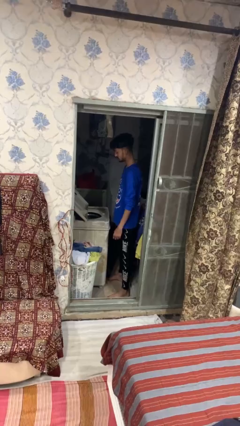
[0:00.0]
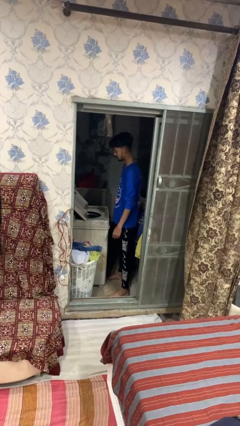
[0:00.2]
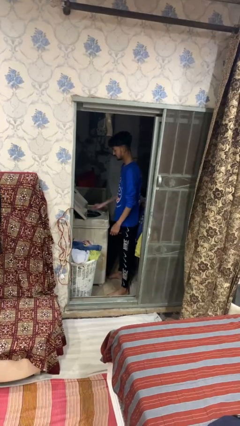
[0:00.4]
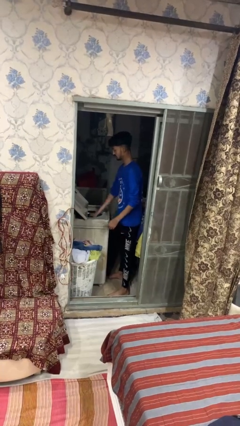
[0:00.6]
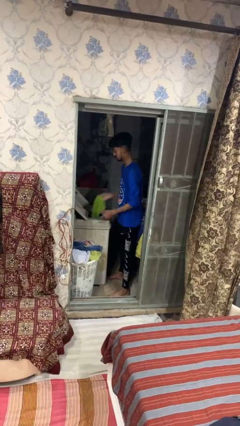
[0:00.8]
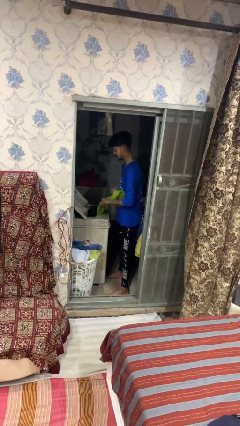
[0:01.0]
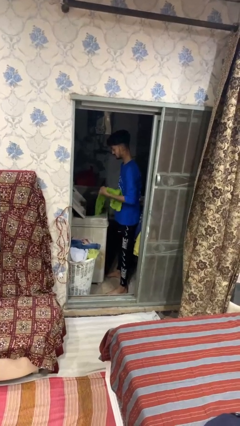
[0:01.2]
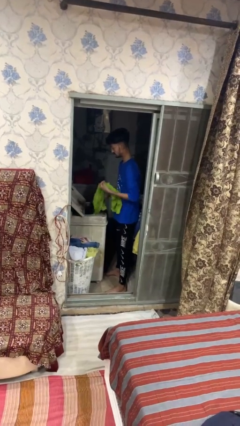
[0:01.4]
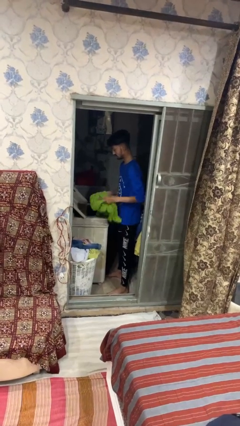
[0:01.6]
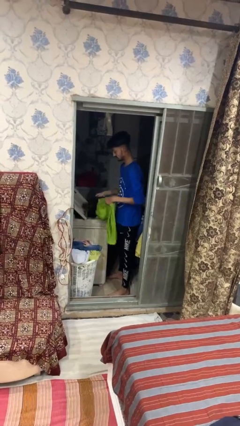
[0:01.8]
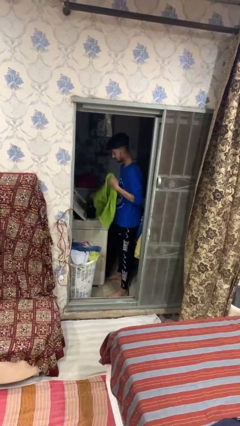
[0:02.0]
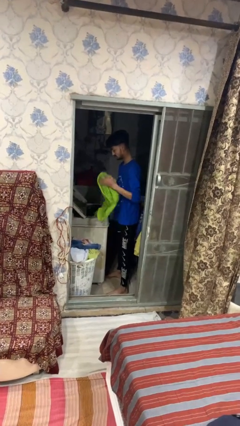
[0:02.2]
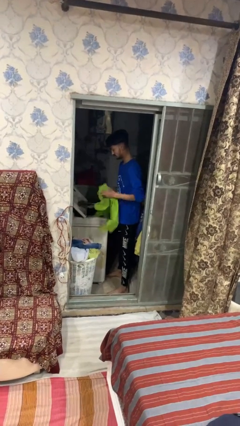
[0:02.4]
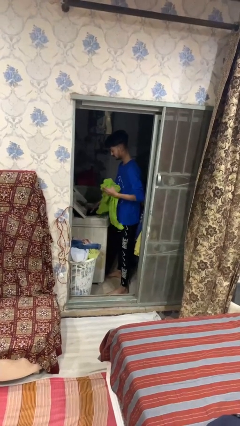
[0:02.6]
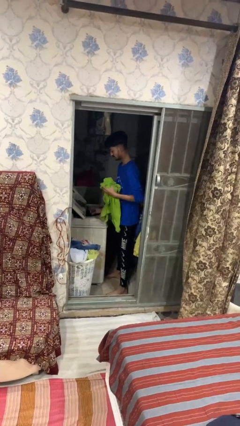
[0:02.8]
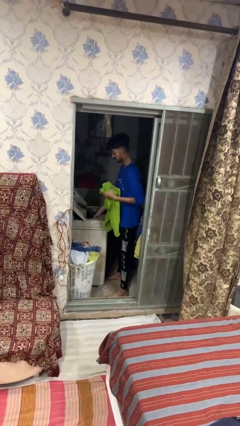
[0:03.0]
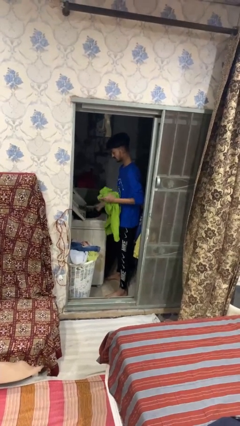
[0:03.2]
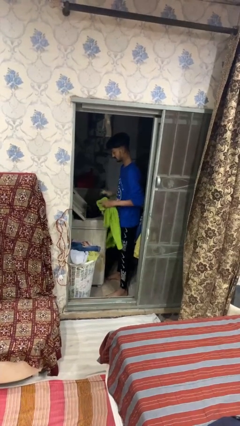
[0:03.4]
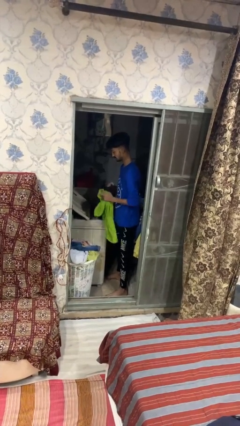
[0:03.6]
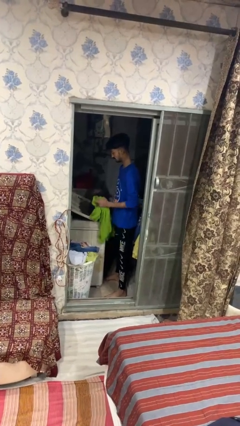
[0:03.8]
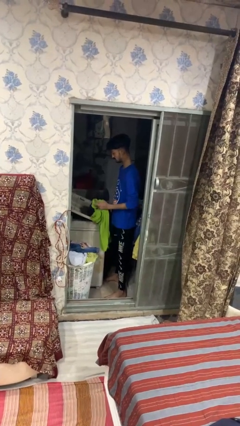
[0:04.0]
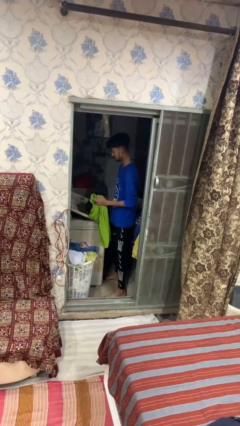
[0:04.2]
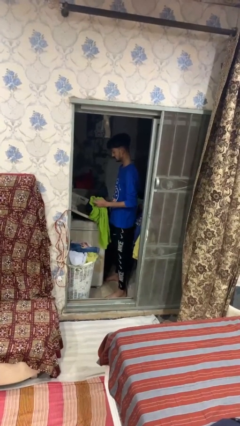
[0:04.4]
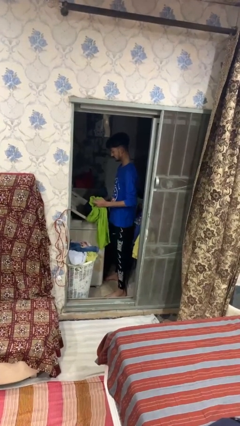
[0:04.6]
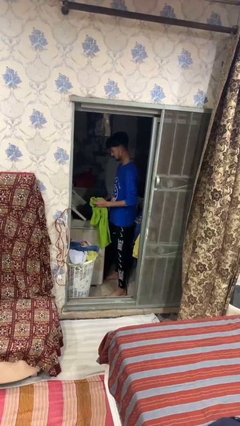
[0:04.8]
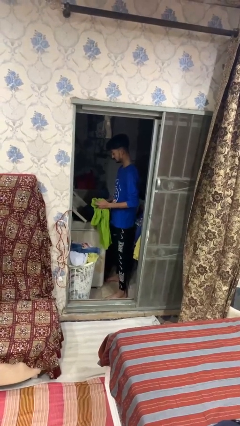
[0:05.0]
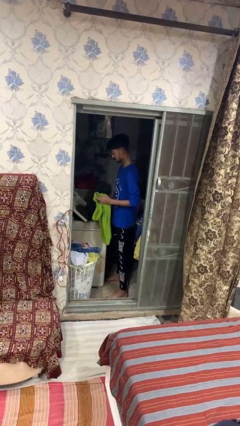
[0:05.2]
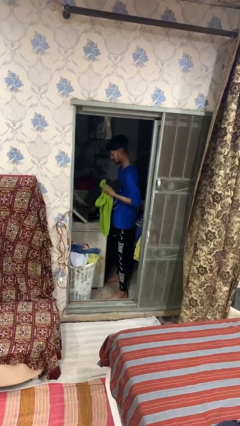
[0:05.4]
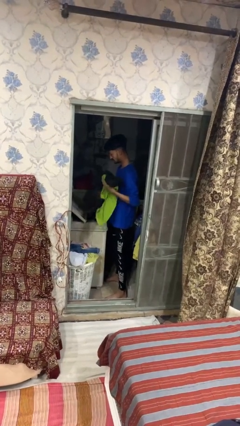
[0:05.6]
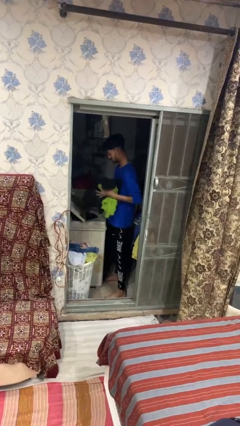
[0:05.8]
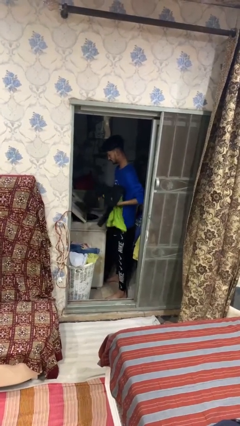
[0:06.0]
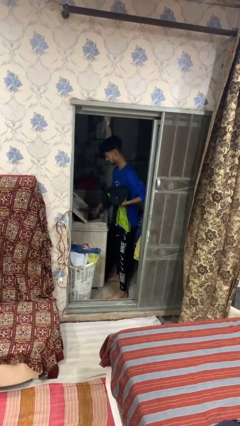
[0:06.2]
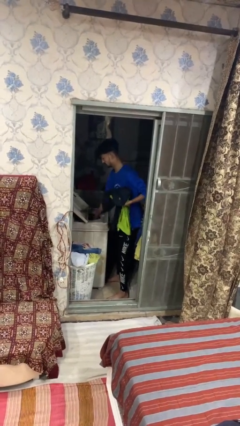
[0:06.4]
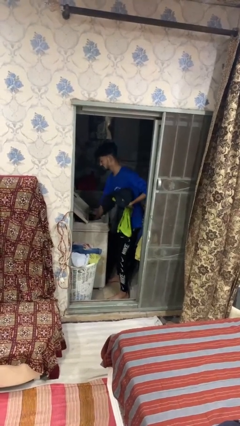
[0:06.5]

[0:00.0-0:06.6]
person unloads clotheswasher

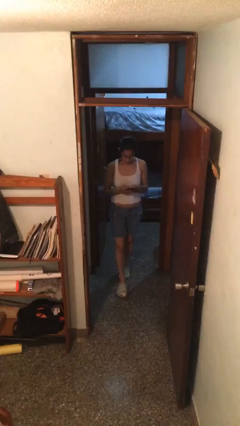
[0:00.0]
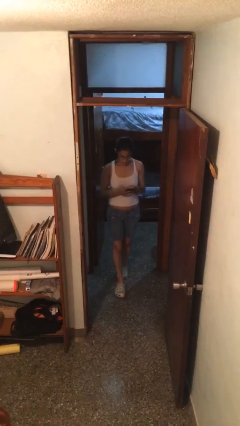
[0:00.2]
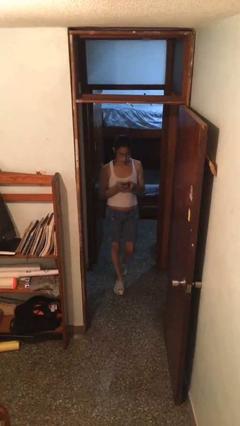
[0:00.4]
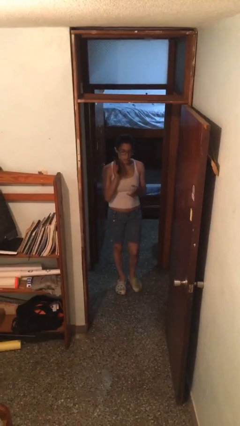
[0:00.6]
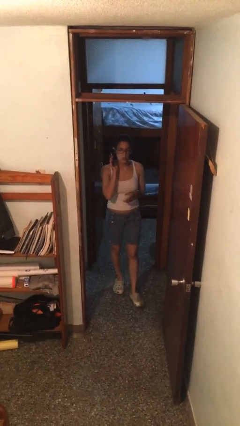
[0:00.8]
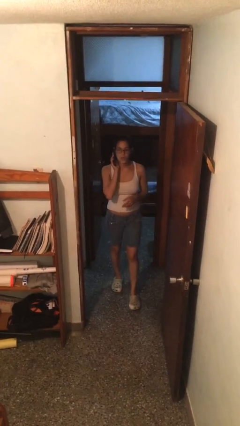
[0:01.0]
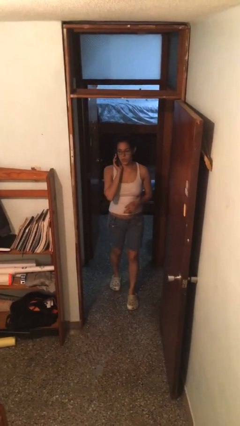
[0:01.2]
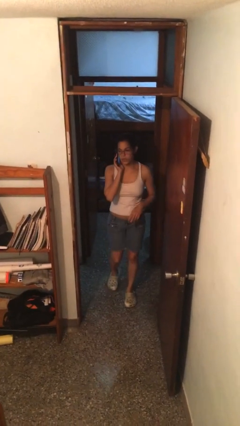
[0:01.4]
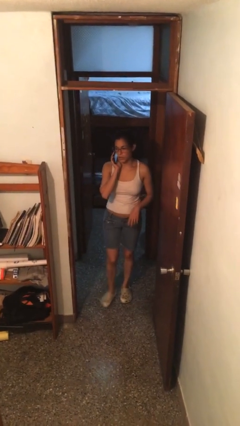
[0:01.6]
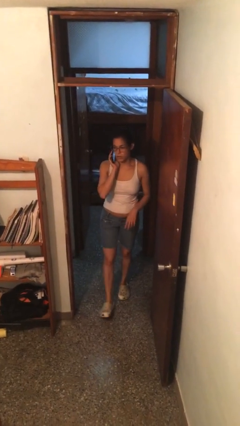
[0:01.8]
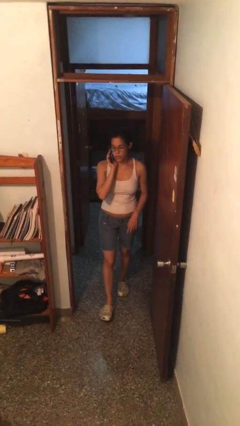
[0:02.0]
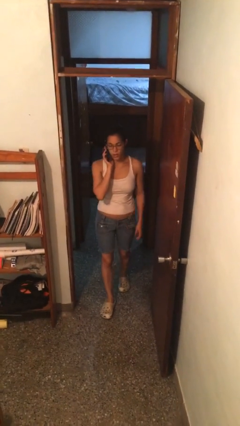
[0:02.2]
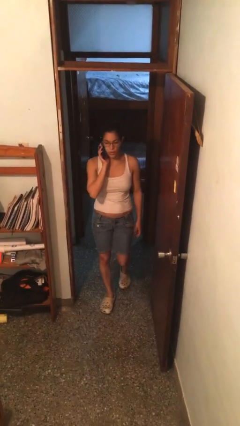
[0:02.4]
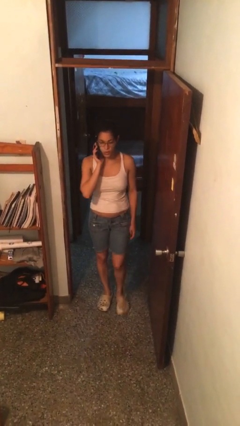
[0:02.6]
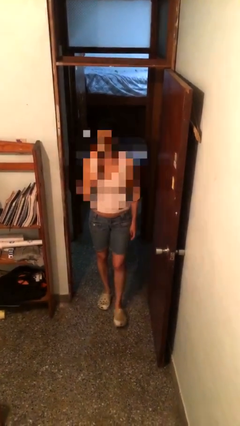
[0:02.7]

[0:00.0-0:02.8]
person talks on phone

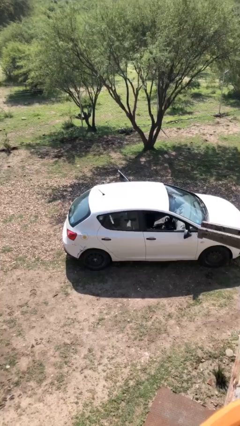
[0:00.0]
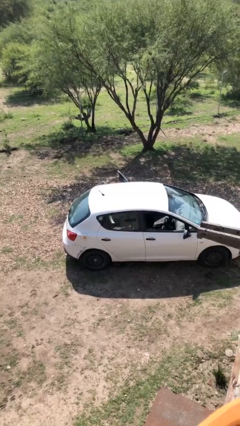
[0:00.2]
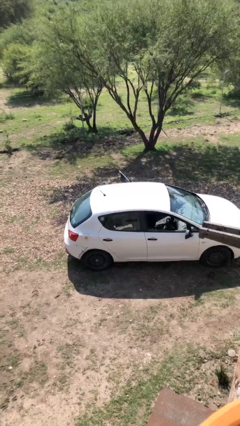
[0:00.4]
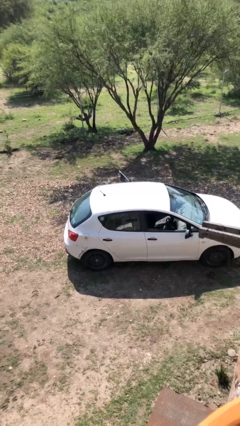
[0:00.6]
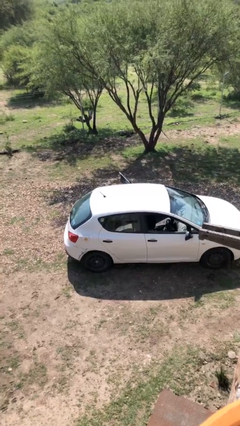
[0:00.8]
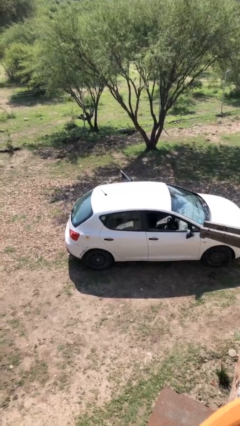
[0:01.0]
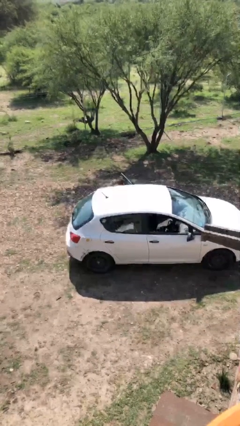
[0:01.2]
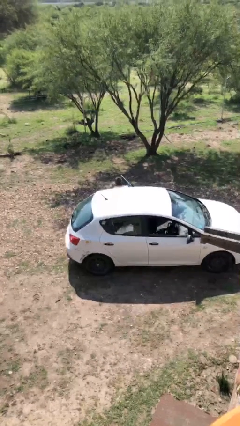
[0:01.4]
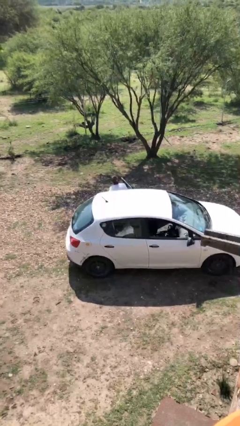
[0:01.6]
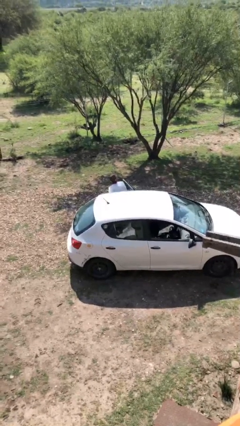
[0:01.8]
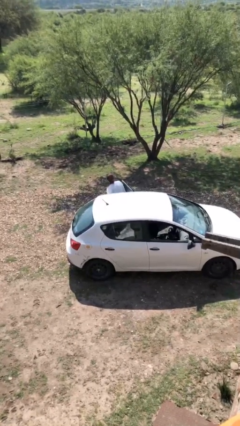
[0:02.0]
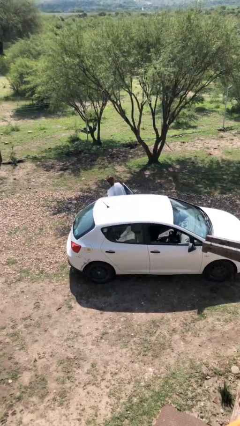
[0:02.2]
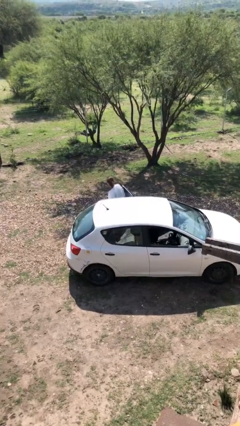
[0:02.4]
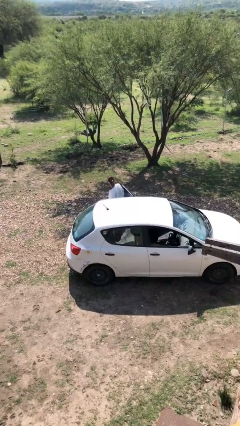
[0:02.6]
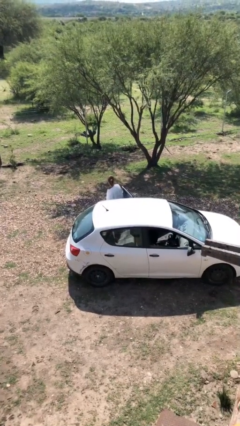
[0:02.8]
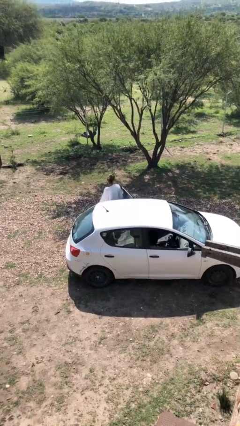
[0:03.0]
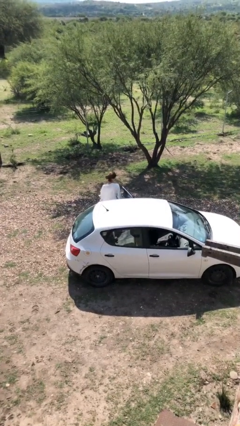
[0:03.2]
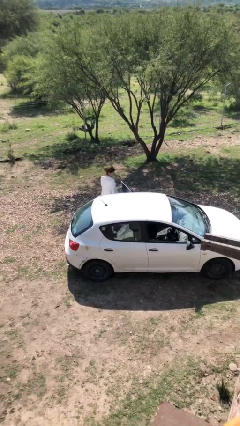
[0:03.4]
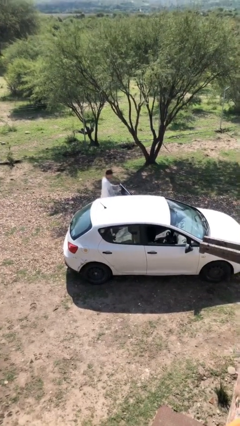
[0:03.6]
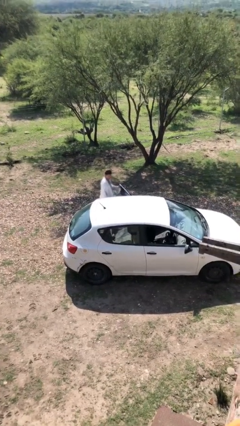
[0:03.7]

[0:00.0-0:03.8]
person exits car

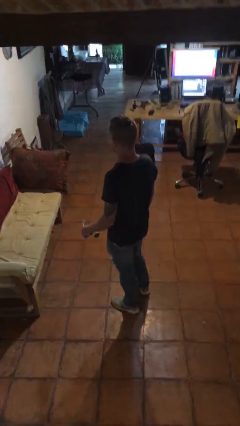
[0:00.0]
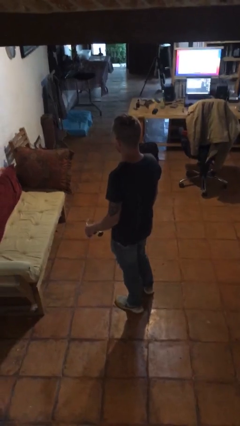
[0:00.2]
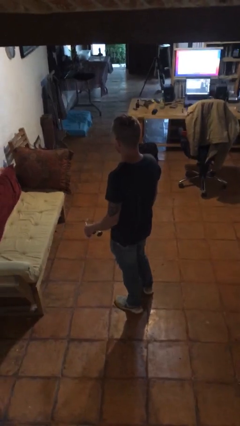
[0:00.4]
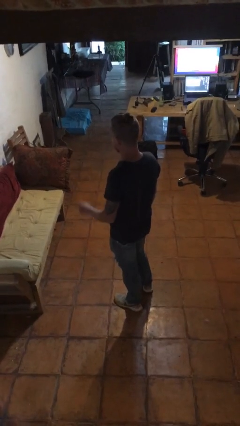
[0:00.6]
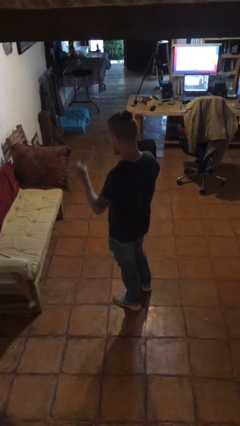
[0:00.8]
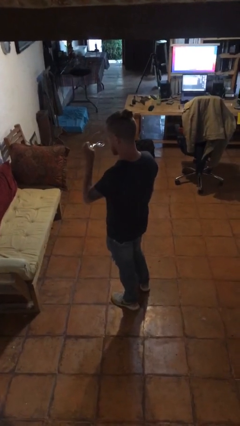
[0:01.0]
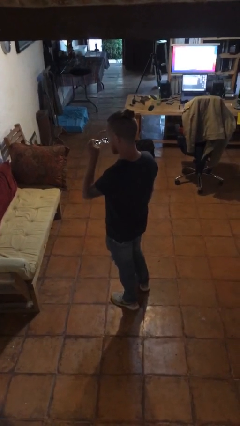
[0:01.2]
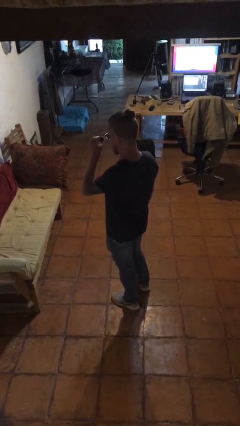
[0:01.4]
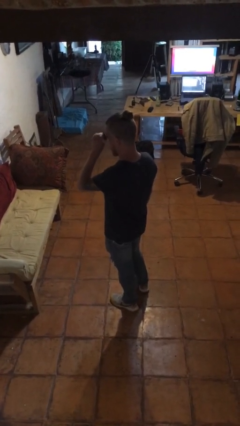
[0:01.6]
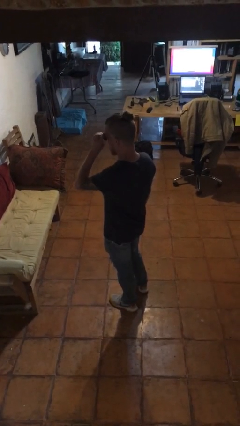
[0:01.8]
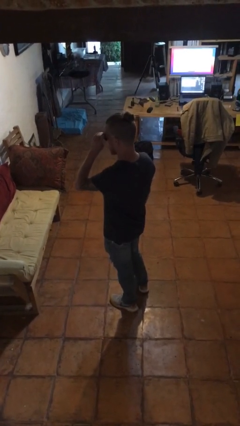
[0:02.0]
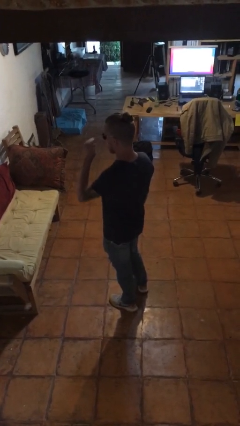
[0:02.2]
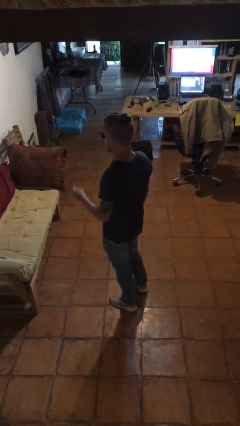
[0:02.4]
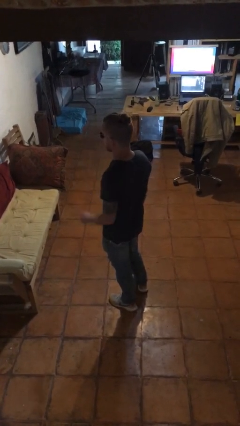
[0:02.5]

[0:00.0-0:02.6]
person puts on sunglasses

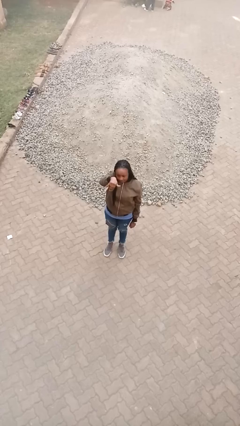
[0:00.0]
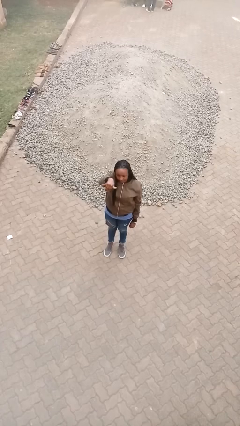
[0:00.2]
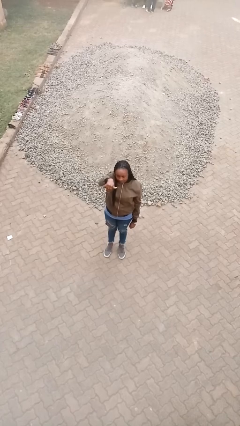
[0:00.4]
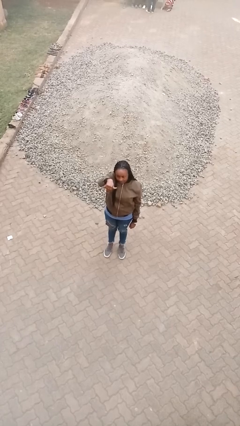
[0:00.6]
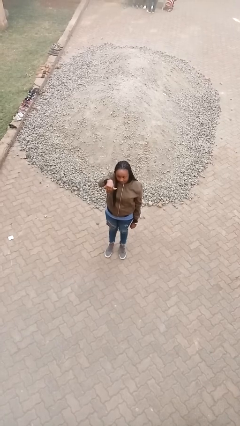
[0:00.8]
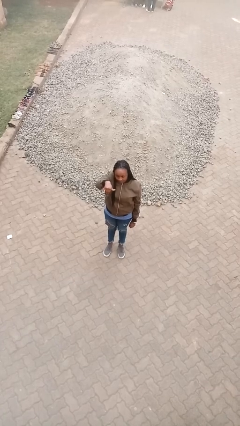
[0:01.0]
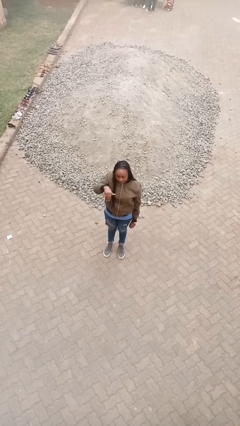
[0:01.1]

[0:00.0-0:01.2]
person gestures hang loose

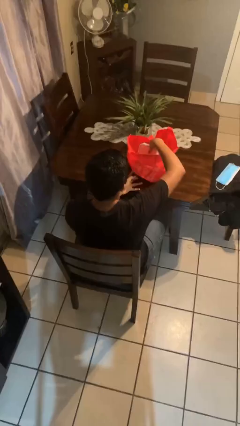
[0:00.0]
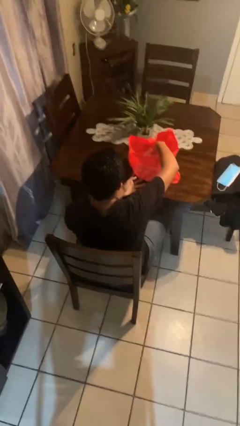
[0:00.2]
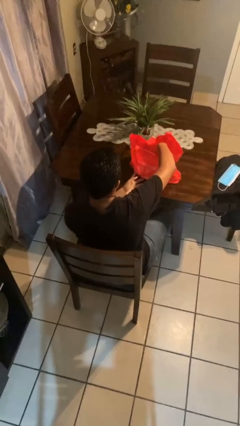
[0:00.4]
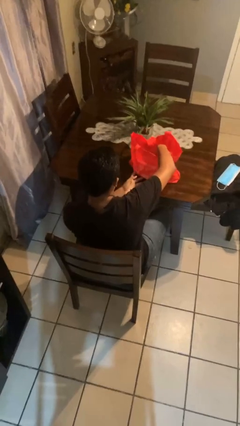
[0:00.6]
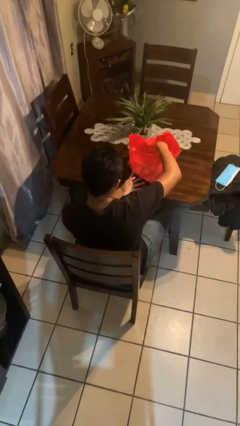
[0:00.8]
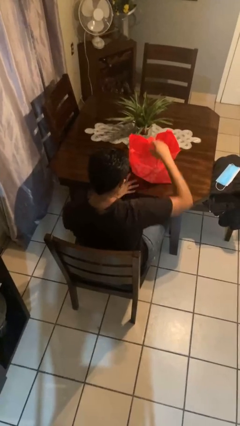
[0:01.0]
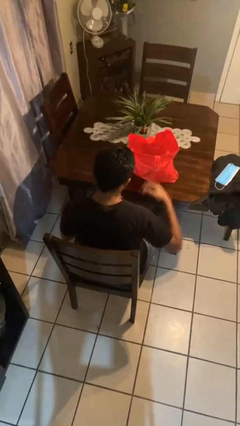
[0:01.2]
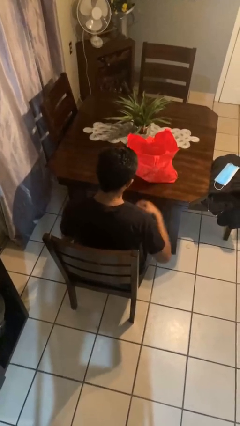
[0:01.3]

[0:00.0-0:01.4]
person puts object into bag
